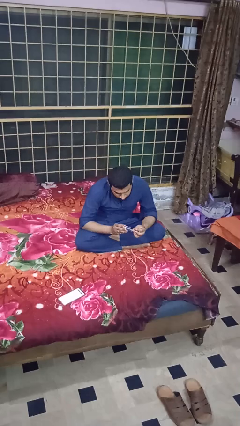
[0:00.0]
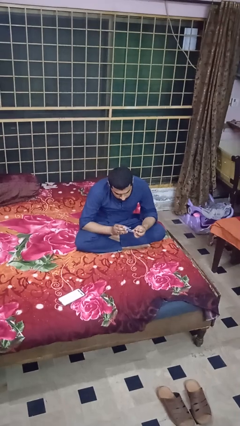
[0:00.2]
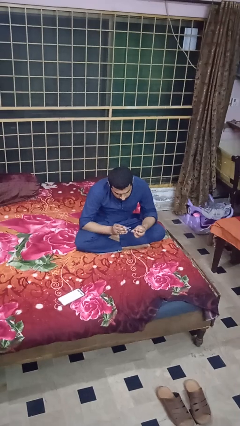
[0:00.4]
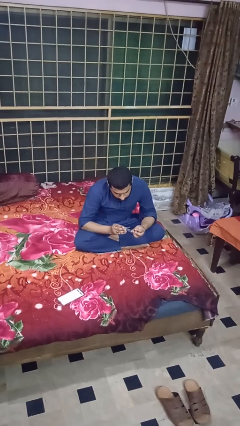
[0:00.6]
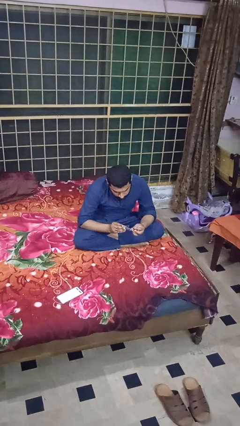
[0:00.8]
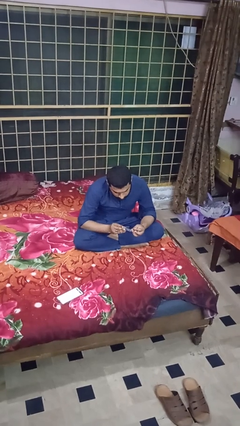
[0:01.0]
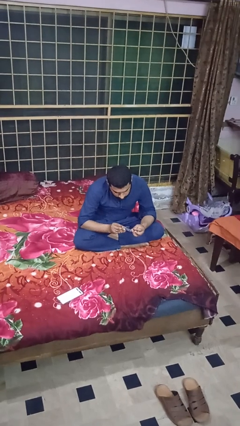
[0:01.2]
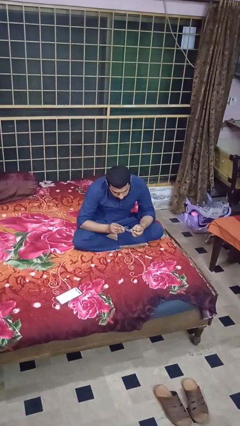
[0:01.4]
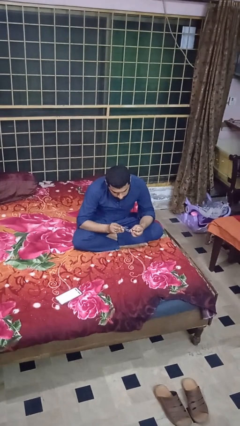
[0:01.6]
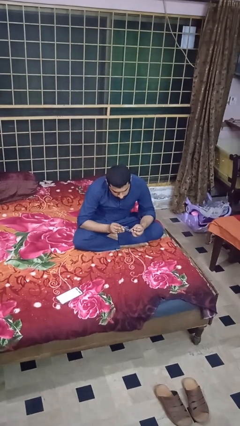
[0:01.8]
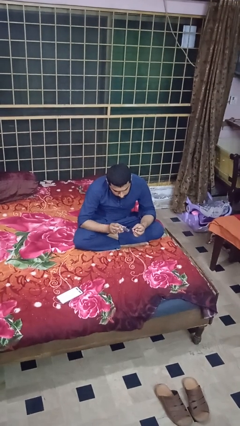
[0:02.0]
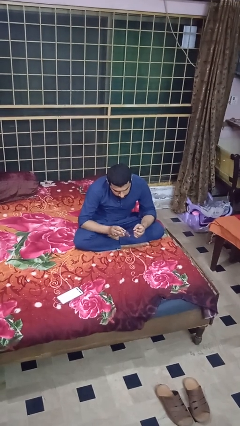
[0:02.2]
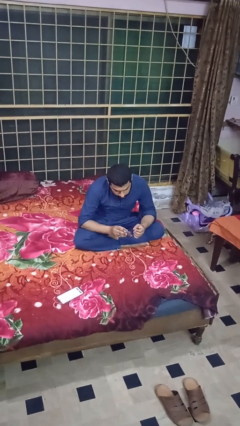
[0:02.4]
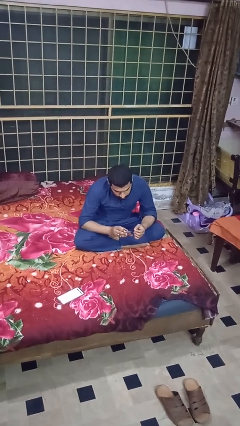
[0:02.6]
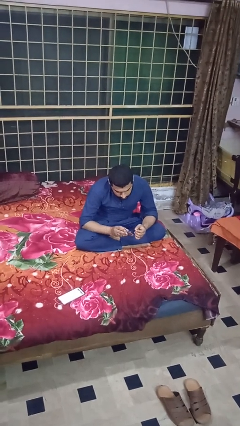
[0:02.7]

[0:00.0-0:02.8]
person clips fingernails

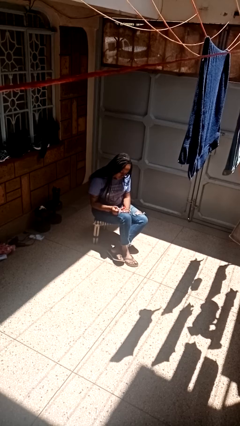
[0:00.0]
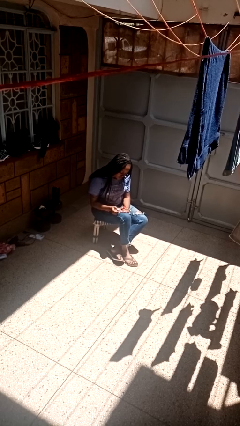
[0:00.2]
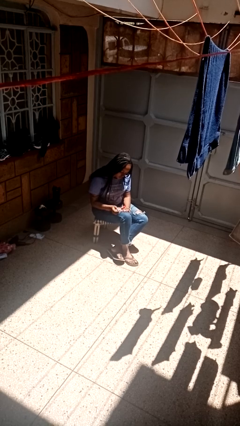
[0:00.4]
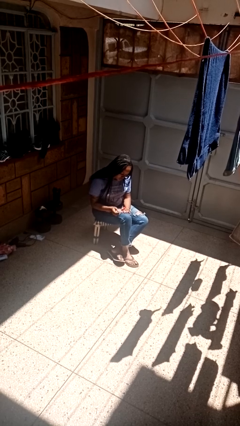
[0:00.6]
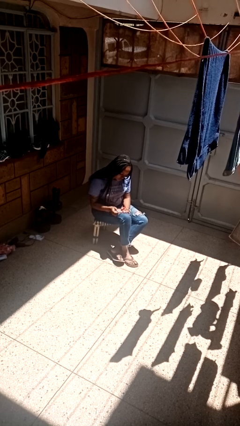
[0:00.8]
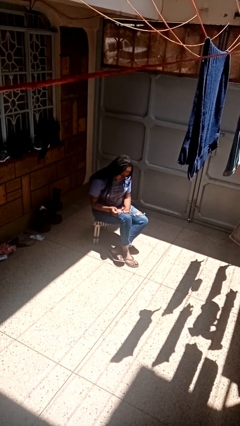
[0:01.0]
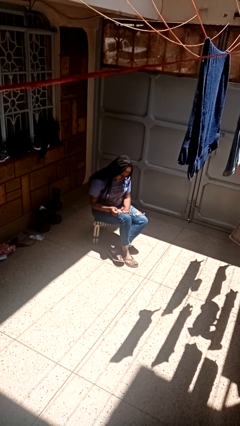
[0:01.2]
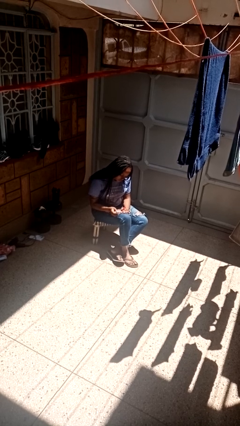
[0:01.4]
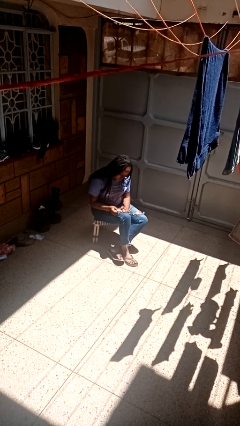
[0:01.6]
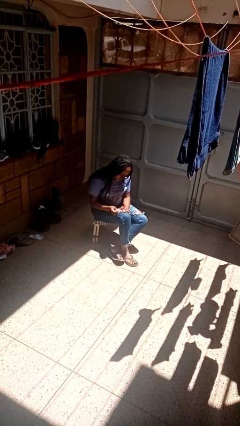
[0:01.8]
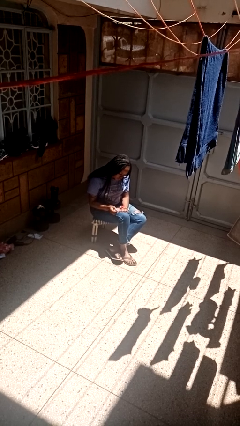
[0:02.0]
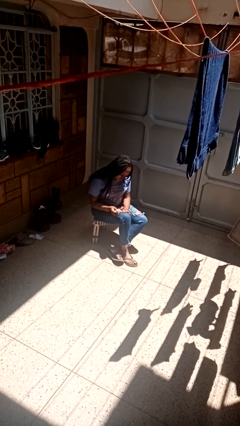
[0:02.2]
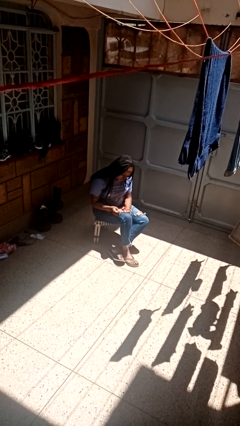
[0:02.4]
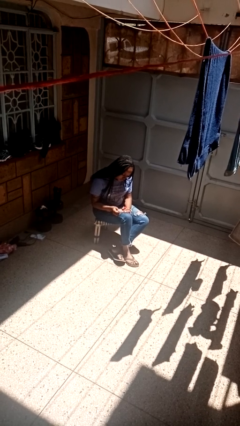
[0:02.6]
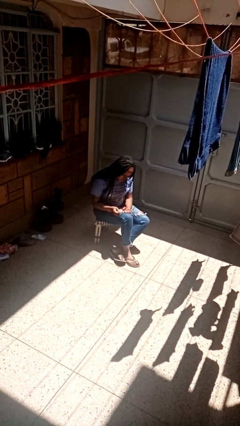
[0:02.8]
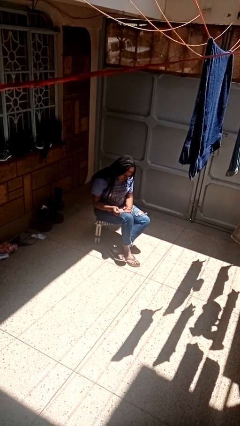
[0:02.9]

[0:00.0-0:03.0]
person paints fingernails

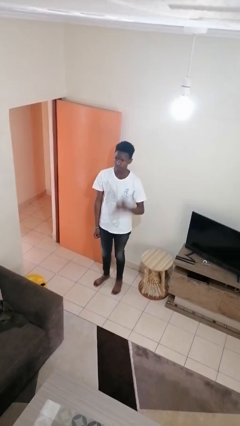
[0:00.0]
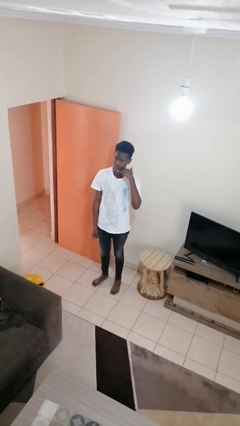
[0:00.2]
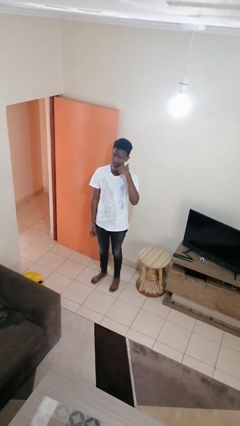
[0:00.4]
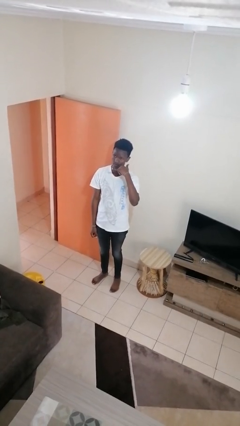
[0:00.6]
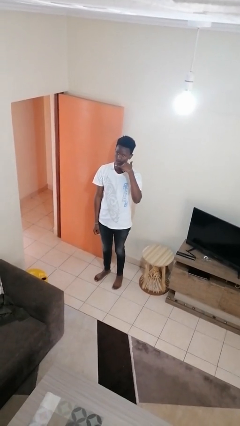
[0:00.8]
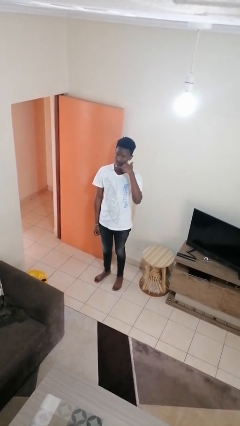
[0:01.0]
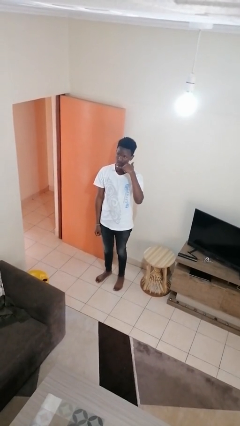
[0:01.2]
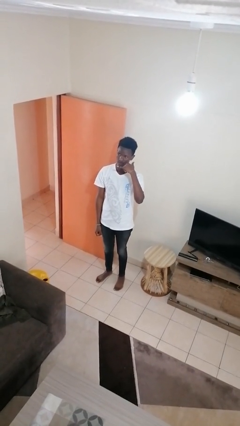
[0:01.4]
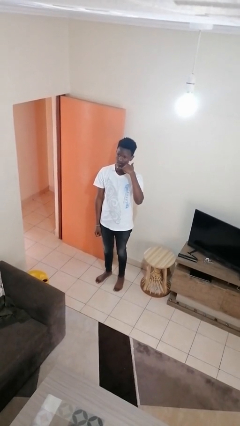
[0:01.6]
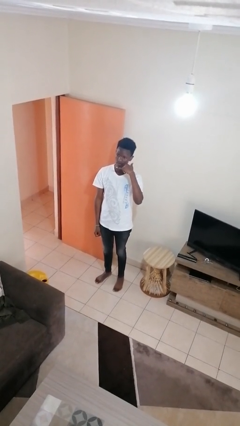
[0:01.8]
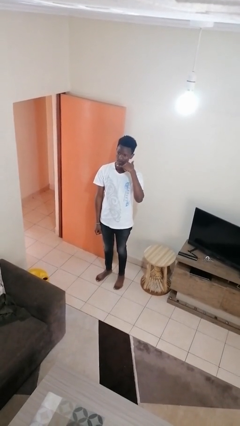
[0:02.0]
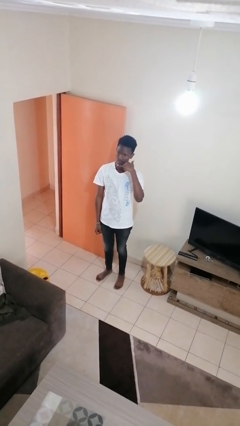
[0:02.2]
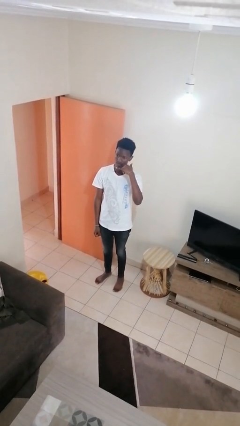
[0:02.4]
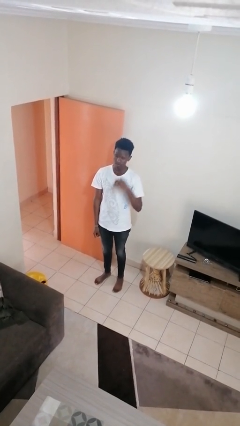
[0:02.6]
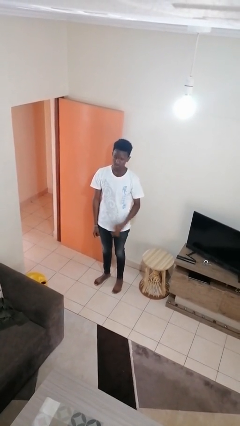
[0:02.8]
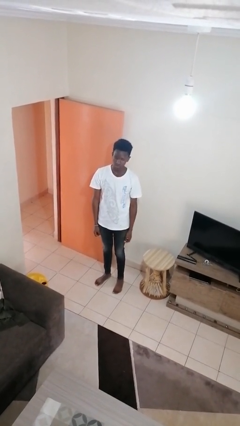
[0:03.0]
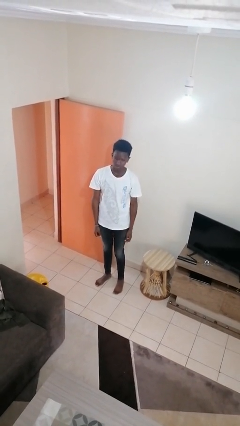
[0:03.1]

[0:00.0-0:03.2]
person gestures call me

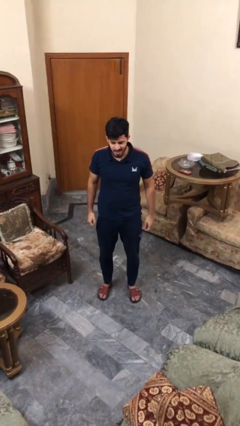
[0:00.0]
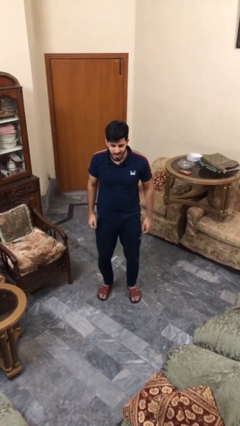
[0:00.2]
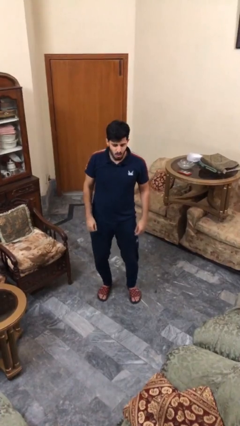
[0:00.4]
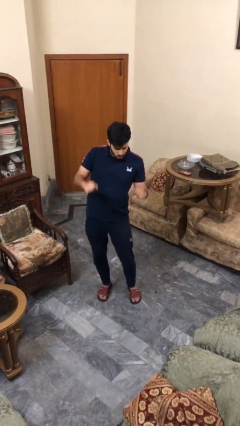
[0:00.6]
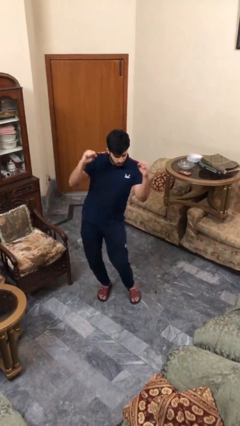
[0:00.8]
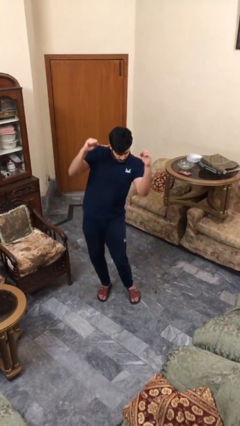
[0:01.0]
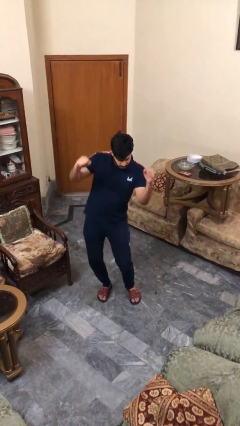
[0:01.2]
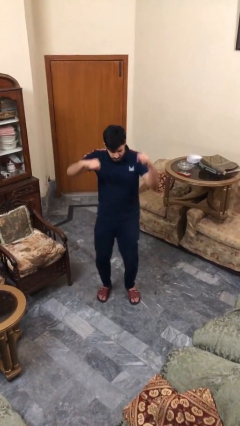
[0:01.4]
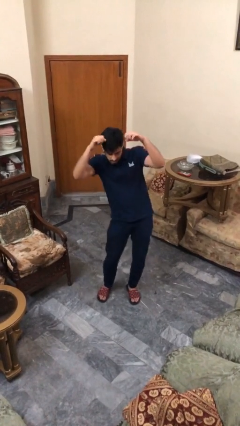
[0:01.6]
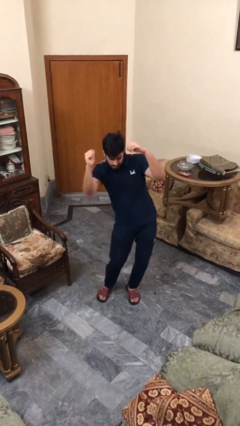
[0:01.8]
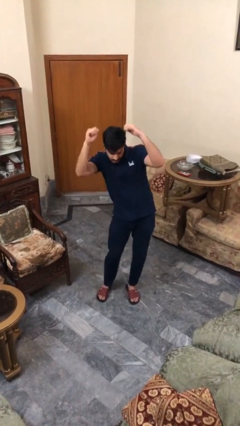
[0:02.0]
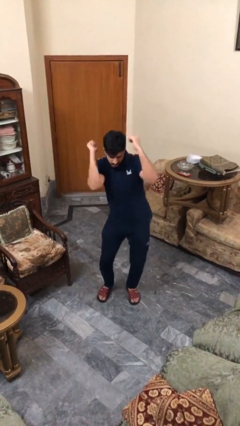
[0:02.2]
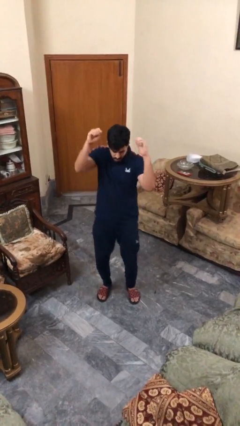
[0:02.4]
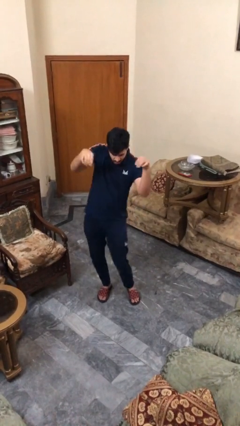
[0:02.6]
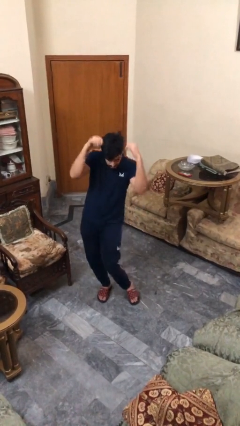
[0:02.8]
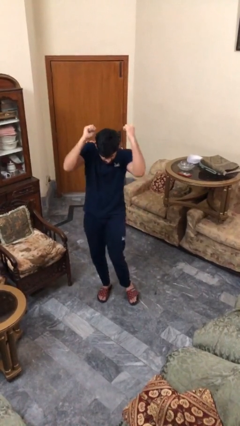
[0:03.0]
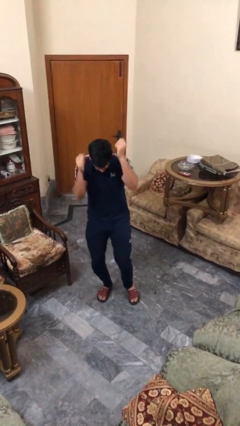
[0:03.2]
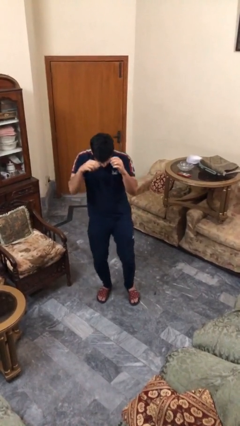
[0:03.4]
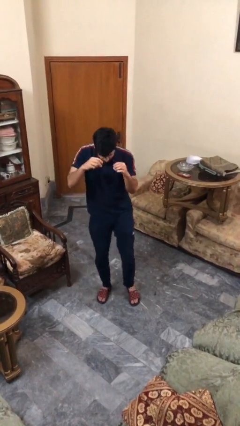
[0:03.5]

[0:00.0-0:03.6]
person dances in place

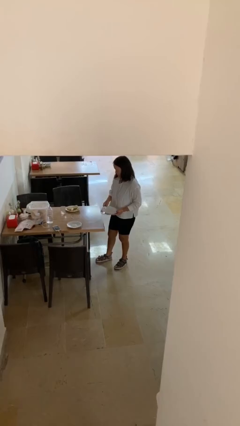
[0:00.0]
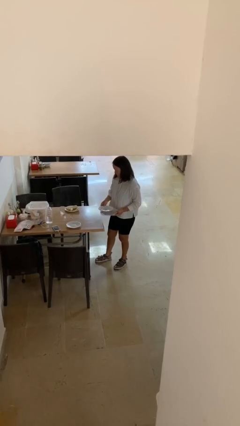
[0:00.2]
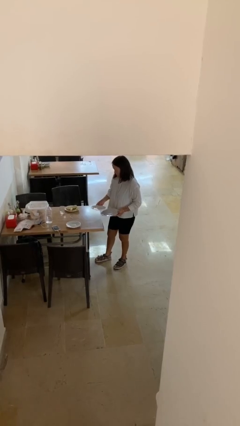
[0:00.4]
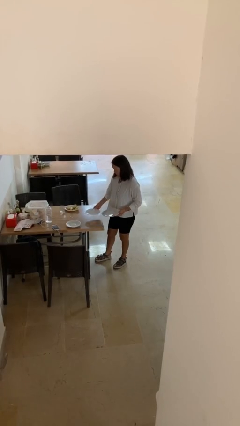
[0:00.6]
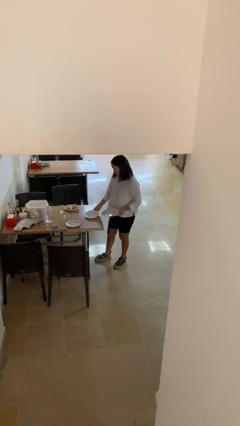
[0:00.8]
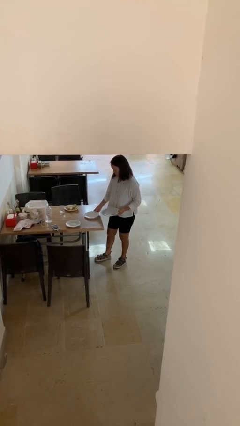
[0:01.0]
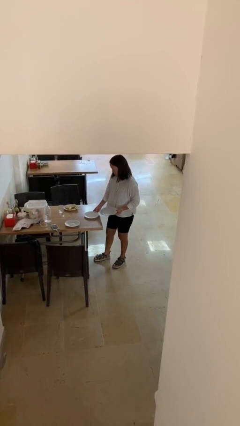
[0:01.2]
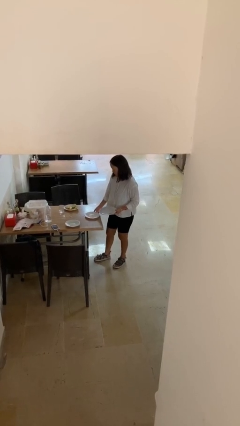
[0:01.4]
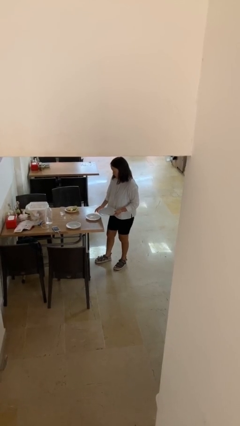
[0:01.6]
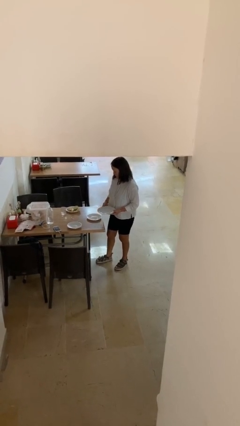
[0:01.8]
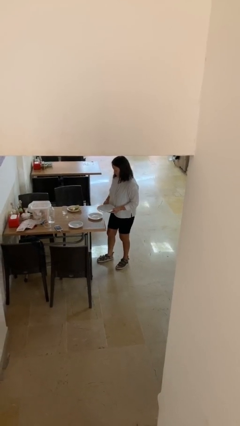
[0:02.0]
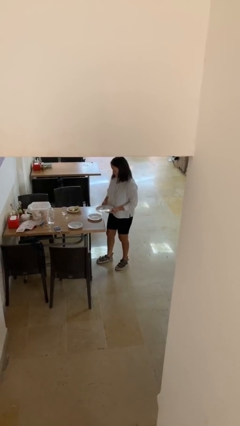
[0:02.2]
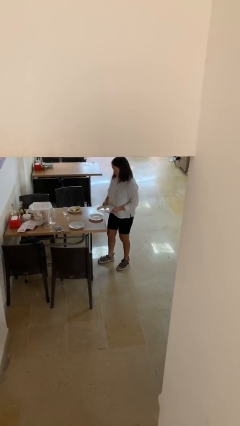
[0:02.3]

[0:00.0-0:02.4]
person sets table

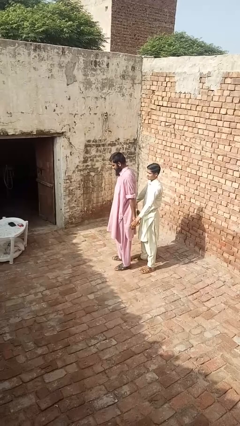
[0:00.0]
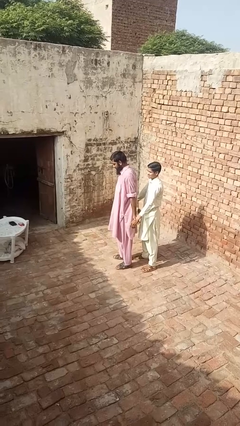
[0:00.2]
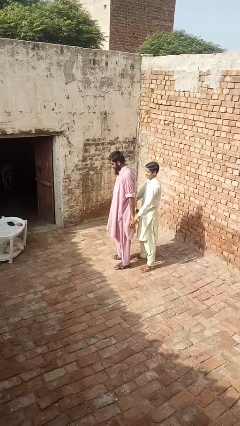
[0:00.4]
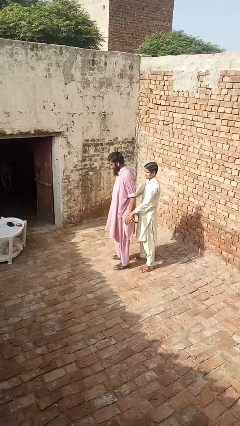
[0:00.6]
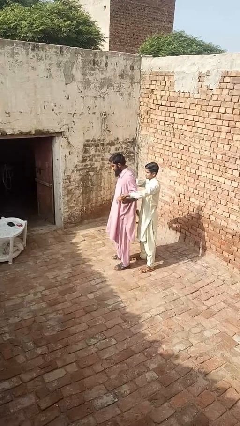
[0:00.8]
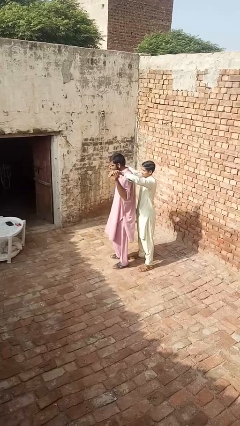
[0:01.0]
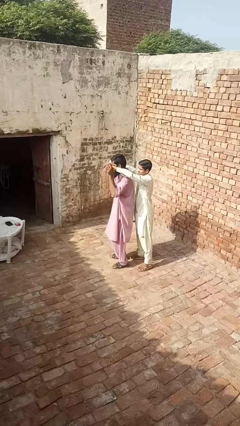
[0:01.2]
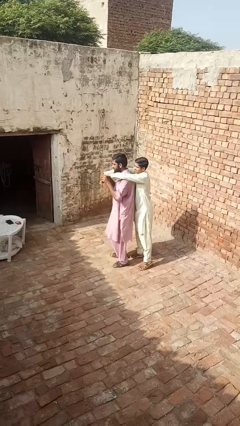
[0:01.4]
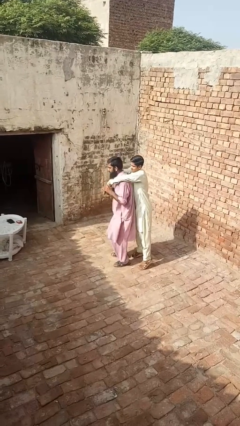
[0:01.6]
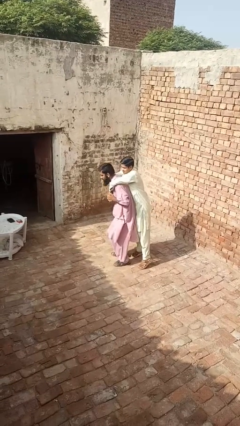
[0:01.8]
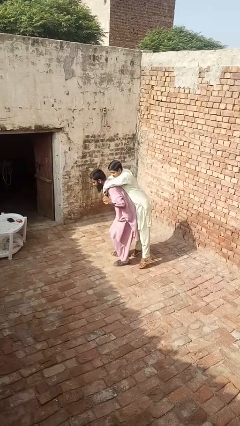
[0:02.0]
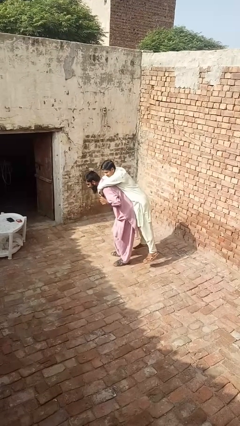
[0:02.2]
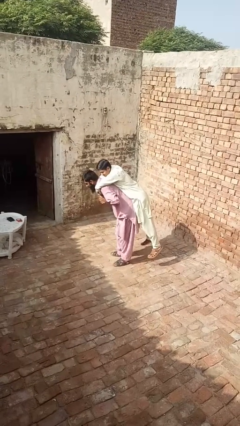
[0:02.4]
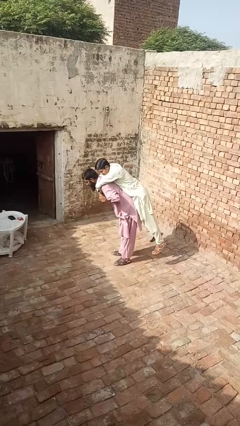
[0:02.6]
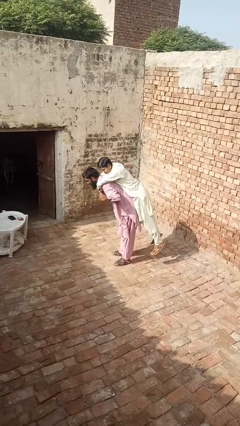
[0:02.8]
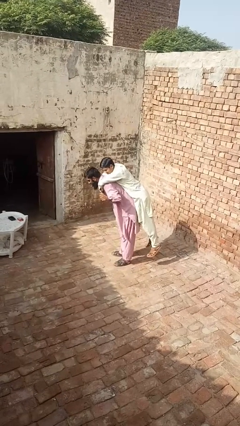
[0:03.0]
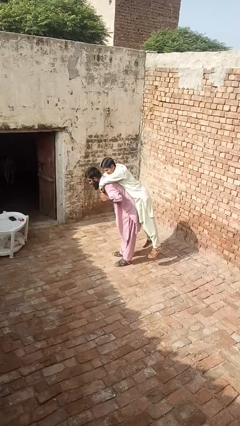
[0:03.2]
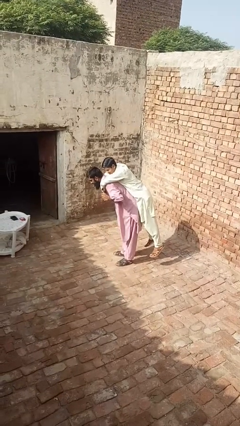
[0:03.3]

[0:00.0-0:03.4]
person picks up person
